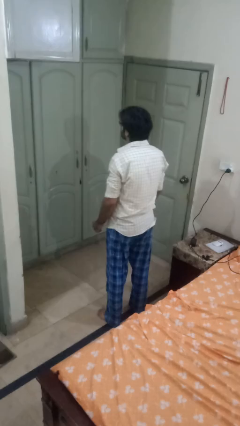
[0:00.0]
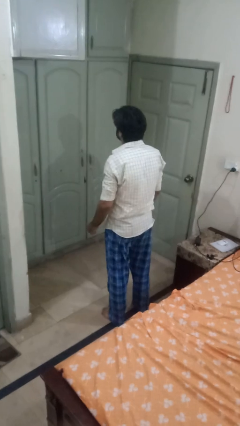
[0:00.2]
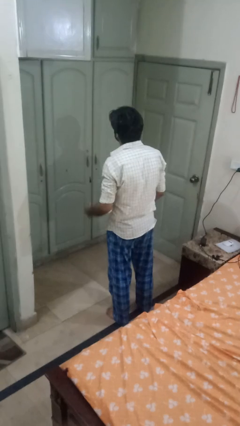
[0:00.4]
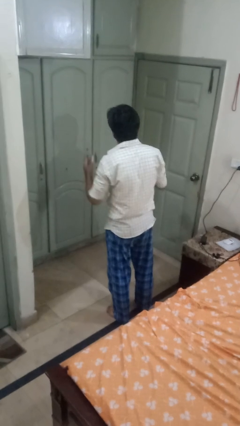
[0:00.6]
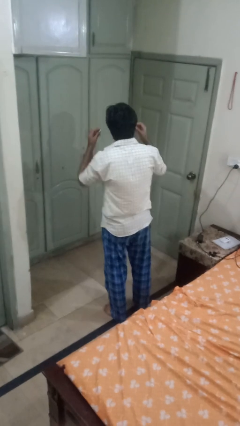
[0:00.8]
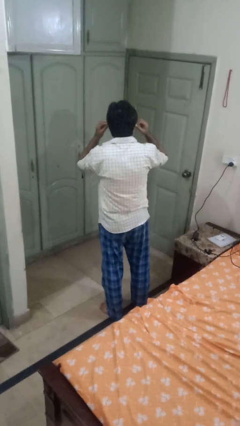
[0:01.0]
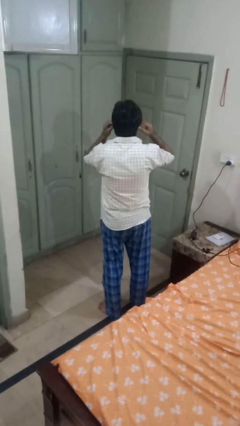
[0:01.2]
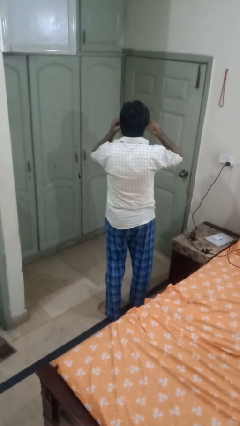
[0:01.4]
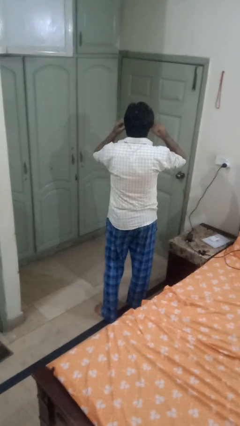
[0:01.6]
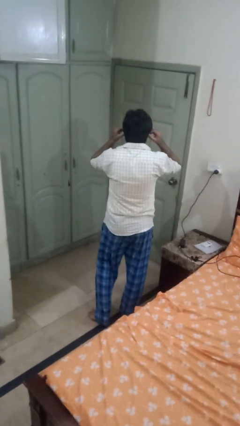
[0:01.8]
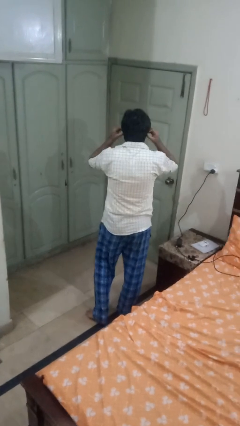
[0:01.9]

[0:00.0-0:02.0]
person puts on headphones

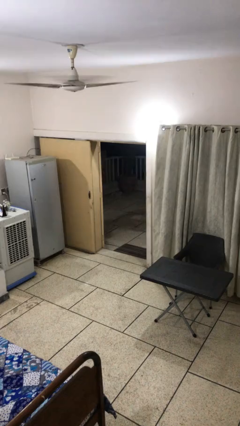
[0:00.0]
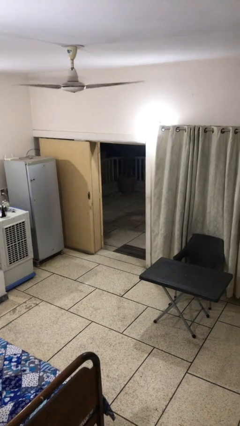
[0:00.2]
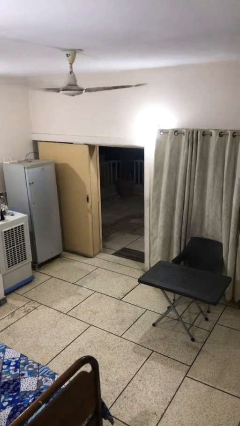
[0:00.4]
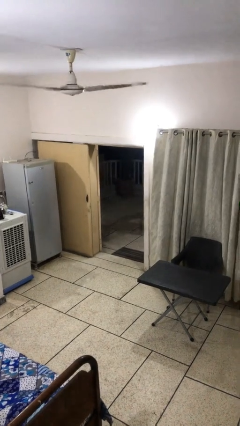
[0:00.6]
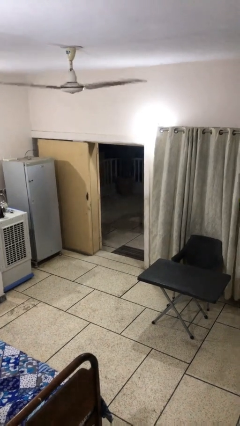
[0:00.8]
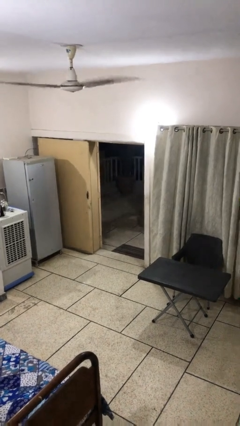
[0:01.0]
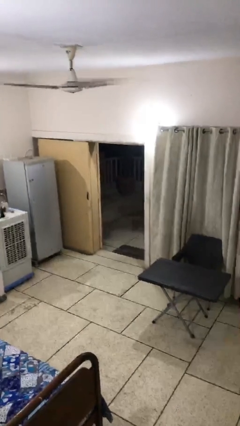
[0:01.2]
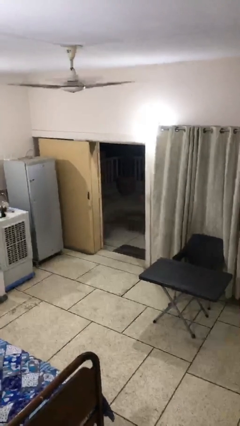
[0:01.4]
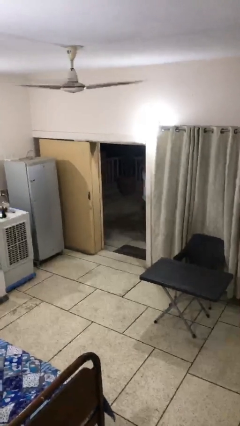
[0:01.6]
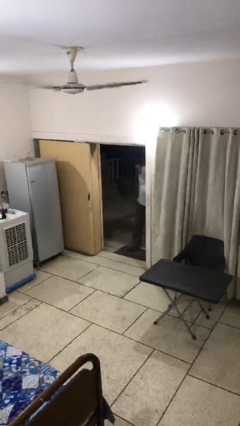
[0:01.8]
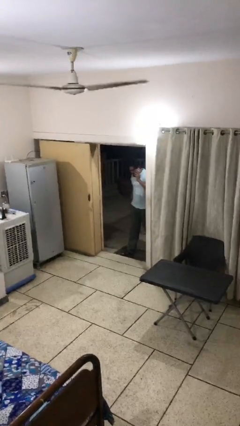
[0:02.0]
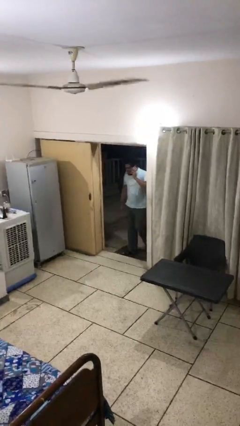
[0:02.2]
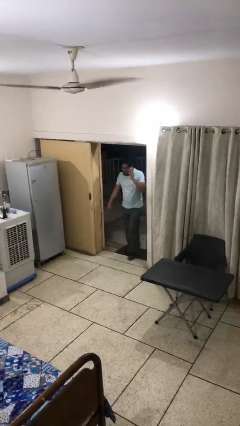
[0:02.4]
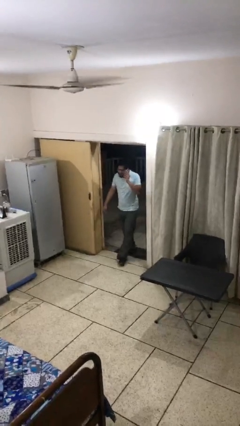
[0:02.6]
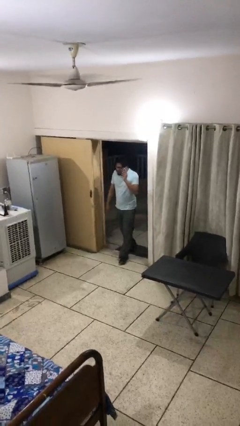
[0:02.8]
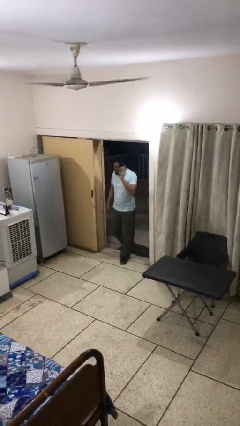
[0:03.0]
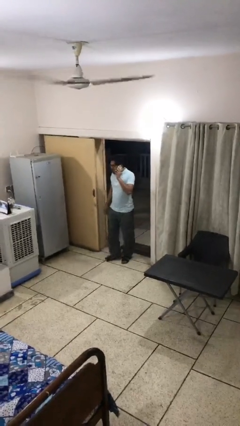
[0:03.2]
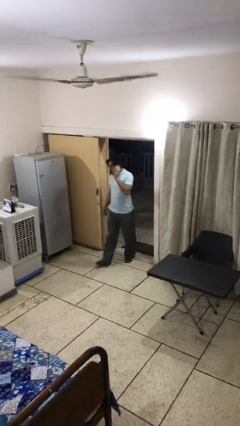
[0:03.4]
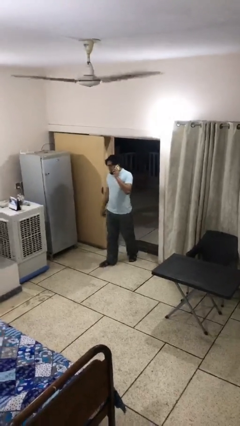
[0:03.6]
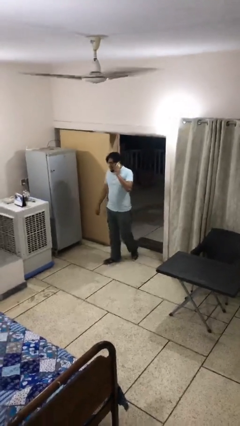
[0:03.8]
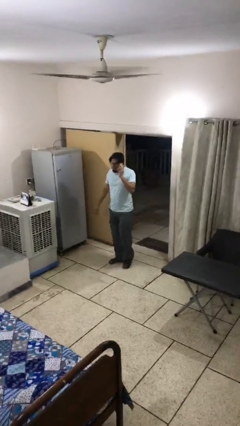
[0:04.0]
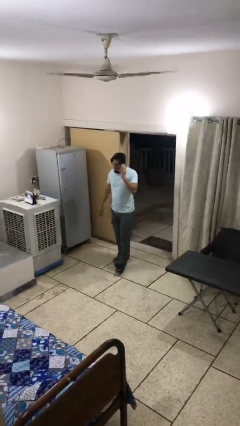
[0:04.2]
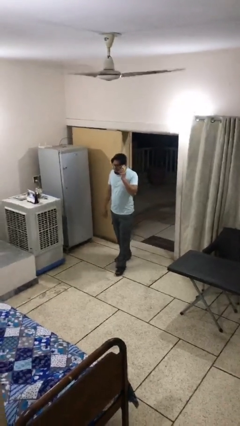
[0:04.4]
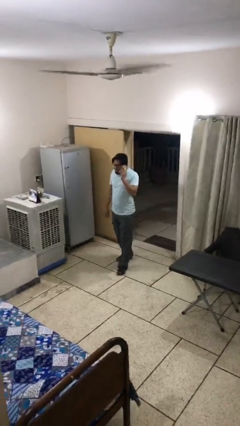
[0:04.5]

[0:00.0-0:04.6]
person enters scene through structure

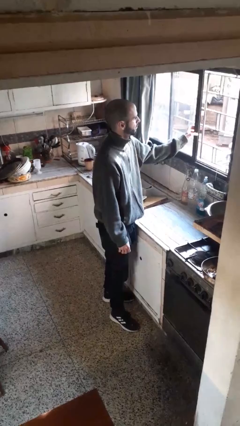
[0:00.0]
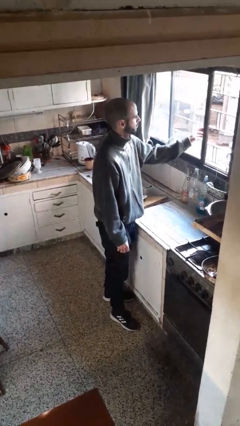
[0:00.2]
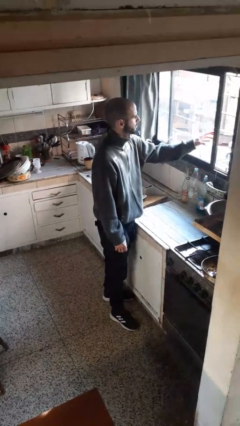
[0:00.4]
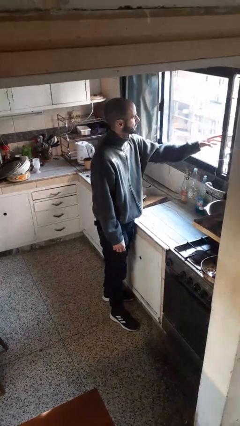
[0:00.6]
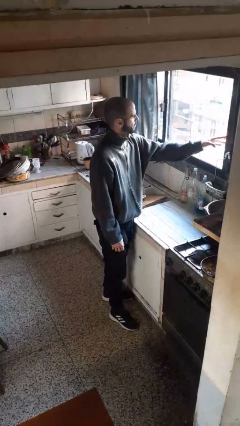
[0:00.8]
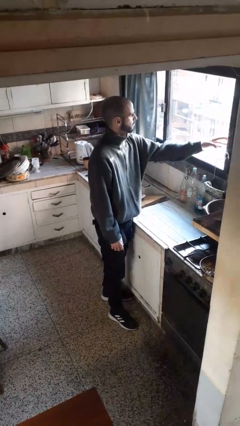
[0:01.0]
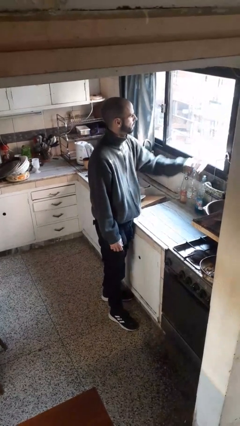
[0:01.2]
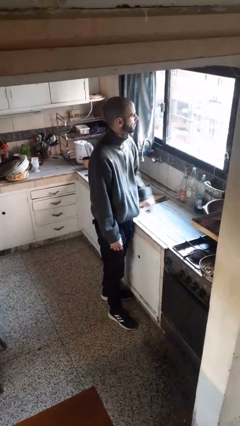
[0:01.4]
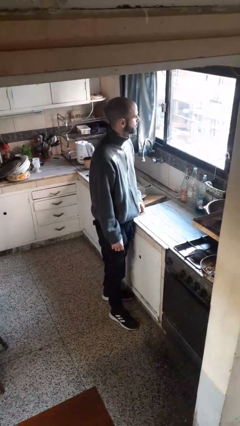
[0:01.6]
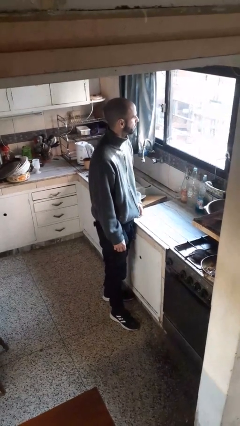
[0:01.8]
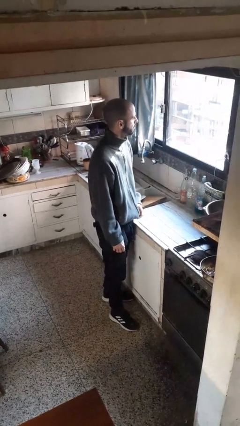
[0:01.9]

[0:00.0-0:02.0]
person closes home window

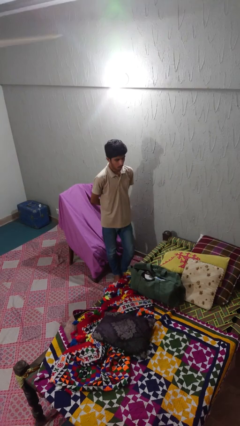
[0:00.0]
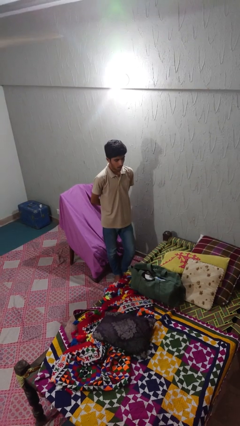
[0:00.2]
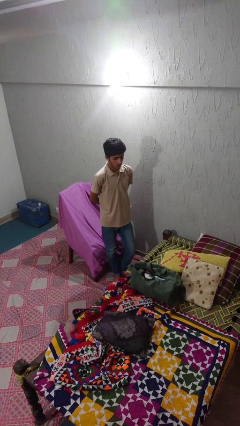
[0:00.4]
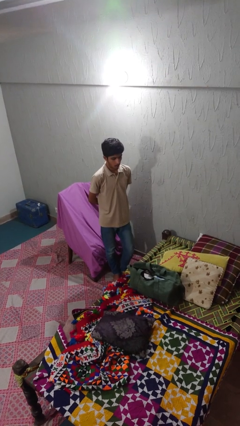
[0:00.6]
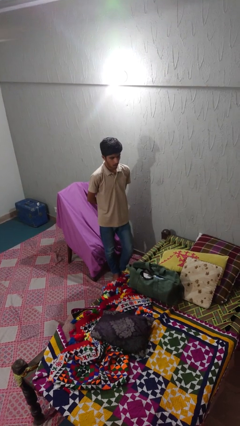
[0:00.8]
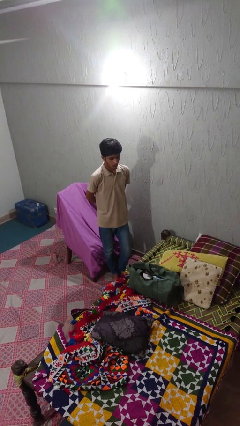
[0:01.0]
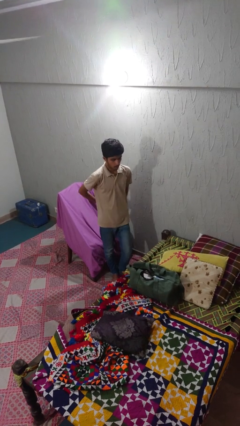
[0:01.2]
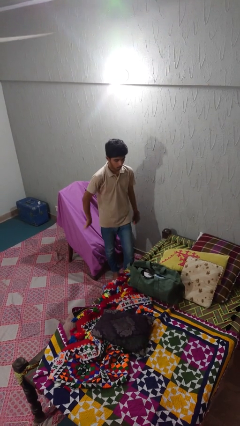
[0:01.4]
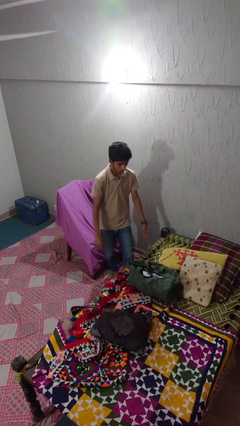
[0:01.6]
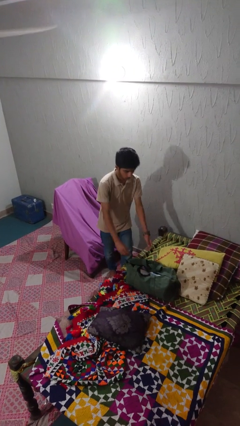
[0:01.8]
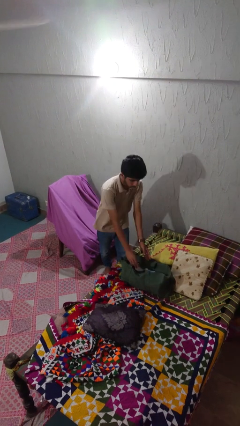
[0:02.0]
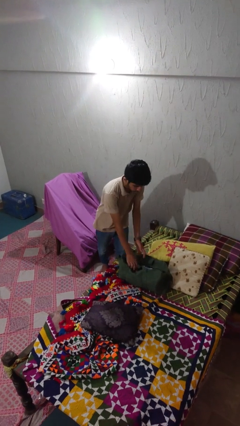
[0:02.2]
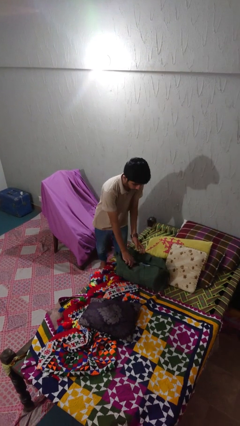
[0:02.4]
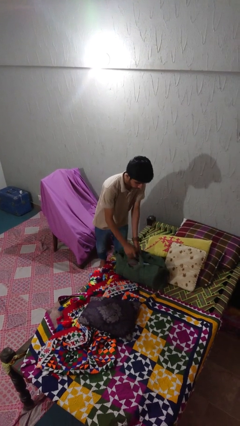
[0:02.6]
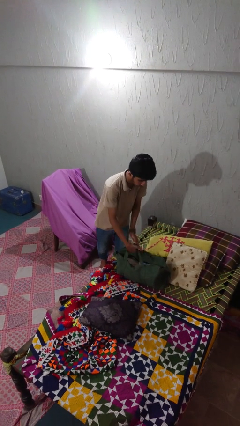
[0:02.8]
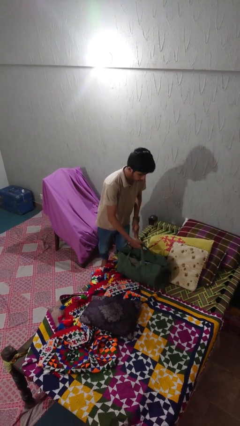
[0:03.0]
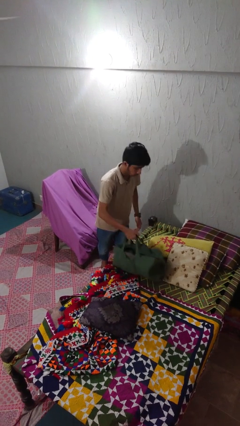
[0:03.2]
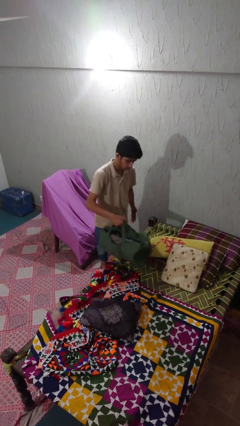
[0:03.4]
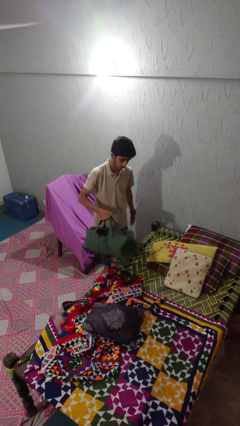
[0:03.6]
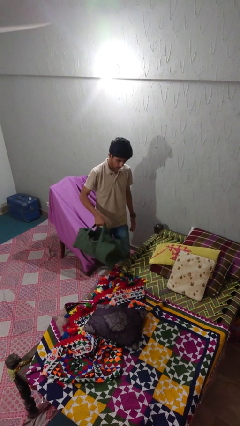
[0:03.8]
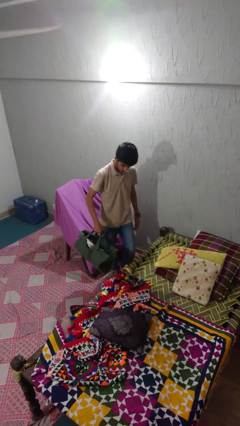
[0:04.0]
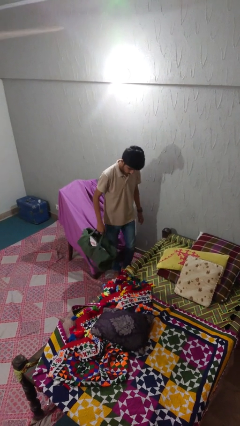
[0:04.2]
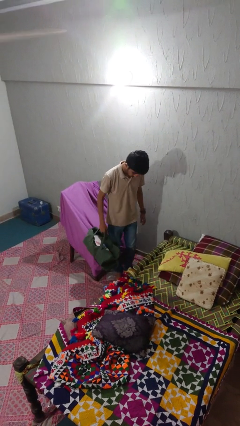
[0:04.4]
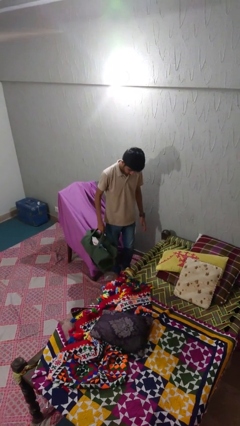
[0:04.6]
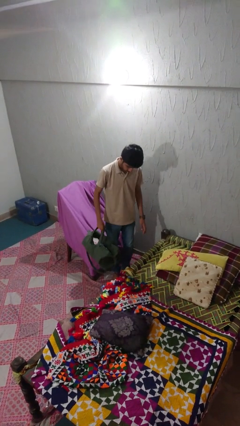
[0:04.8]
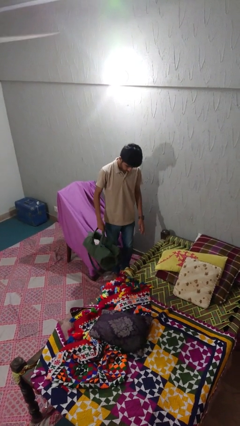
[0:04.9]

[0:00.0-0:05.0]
person picks up object from bed

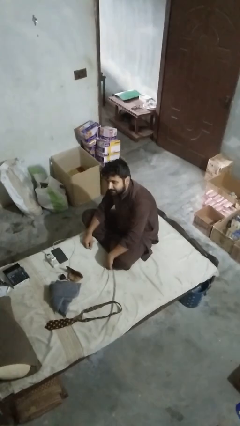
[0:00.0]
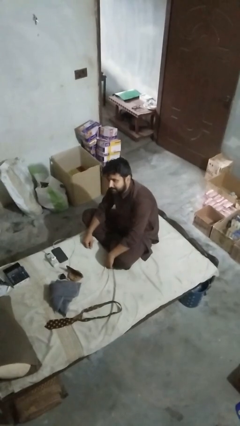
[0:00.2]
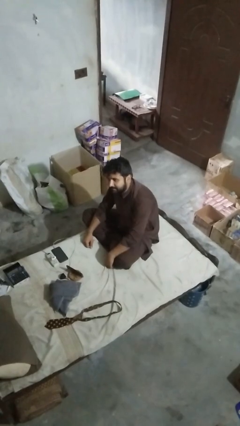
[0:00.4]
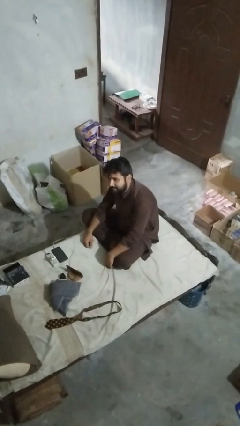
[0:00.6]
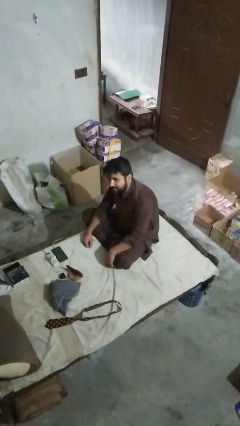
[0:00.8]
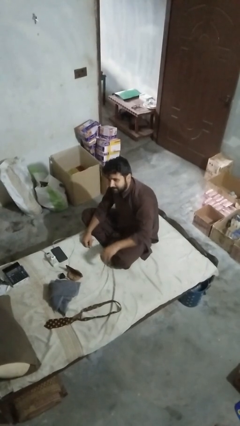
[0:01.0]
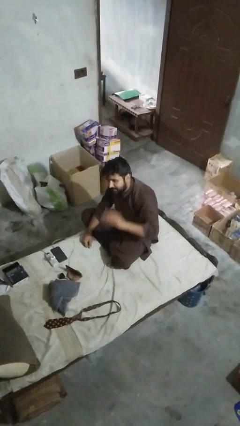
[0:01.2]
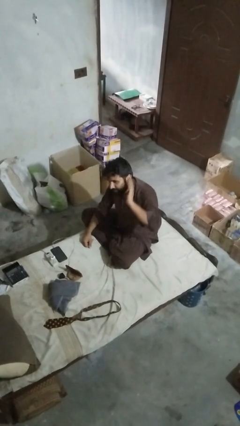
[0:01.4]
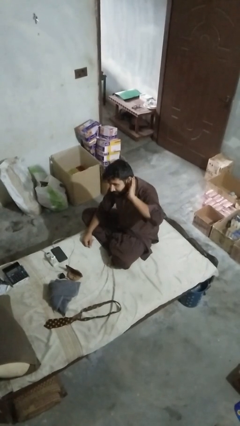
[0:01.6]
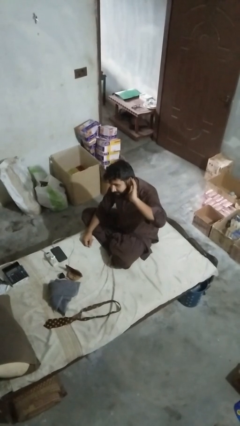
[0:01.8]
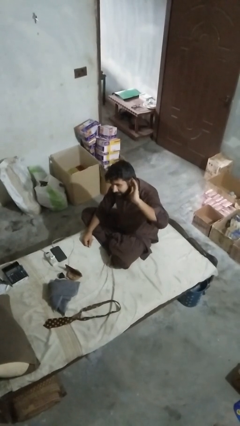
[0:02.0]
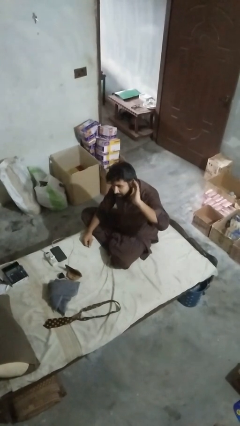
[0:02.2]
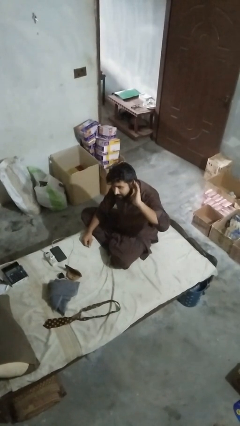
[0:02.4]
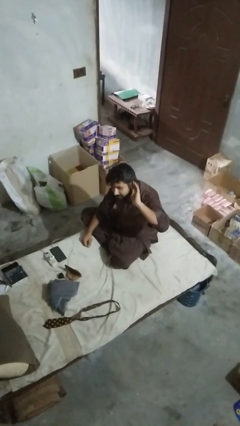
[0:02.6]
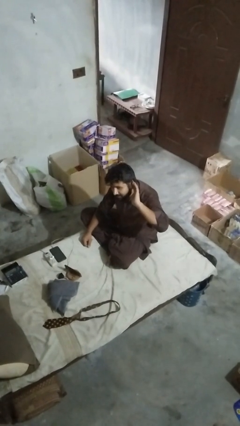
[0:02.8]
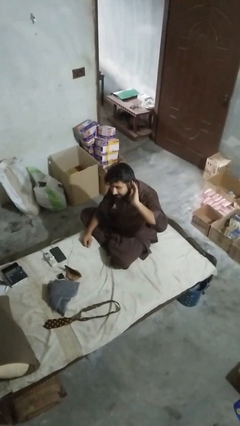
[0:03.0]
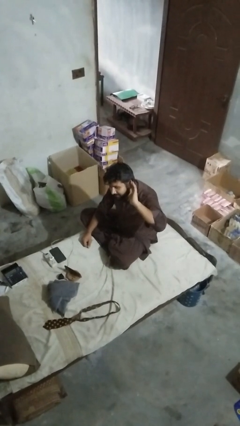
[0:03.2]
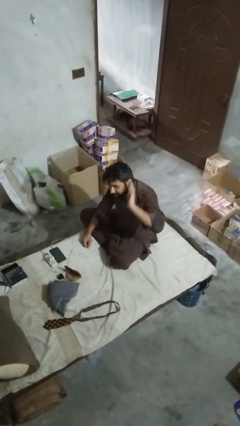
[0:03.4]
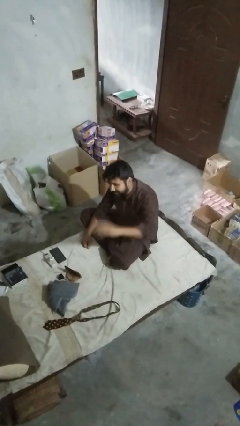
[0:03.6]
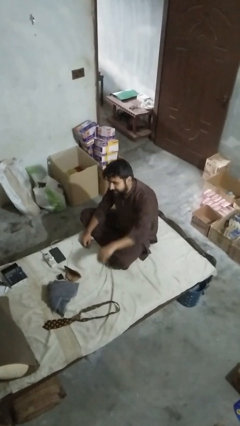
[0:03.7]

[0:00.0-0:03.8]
person gestures listen closely
